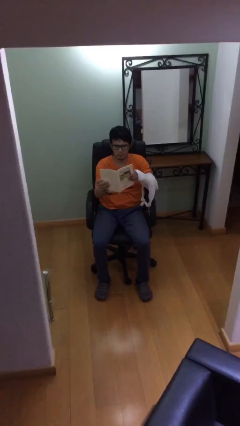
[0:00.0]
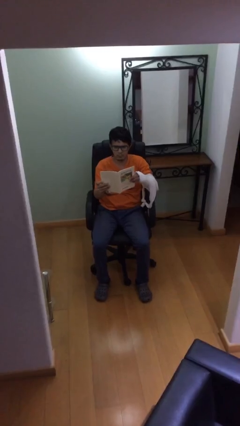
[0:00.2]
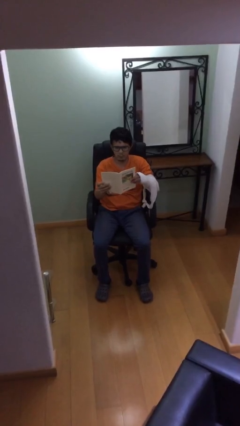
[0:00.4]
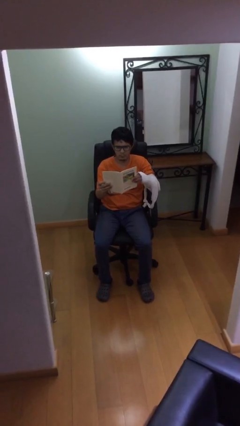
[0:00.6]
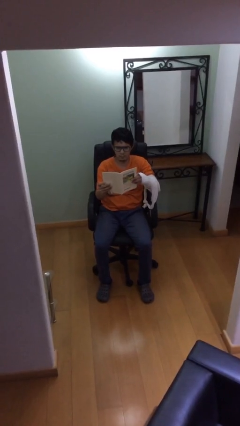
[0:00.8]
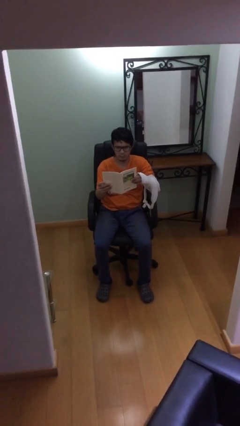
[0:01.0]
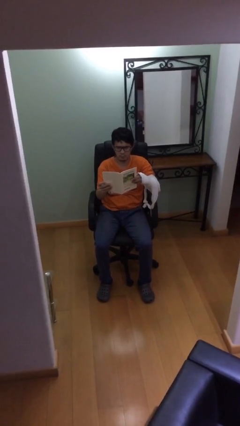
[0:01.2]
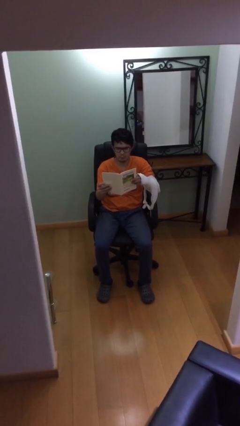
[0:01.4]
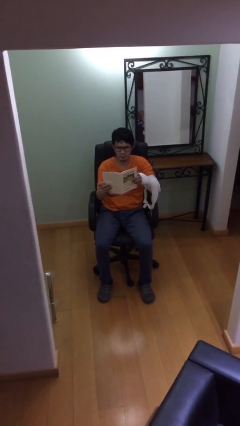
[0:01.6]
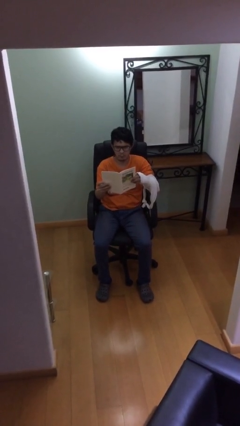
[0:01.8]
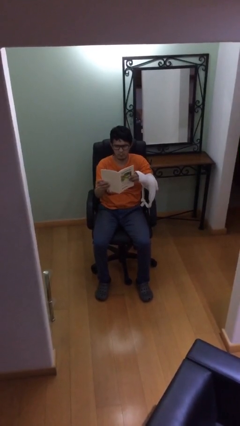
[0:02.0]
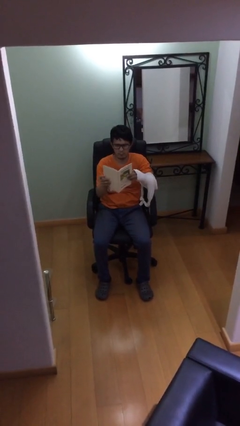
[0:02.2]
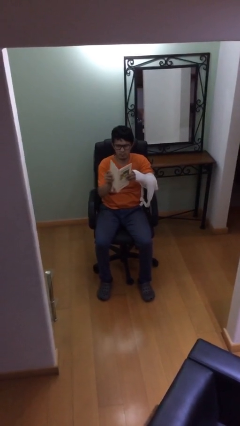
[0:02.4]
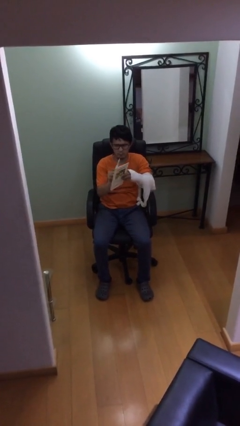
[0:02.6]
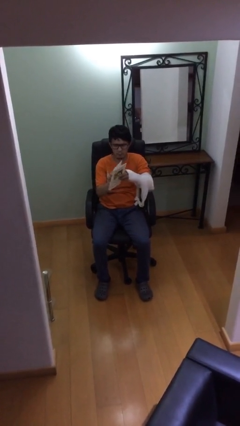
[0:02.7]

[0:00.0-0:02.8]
person reads document

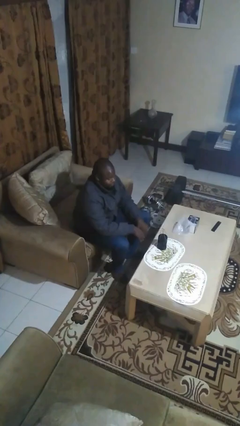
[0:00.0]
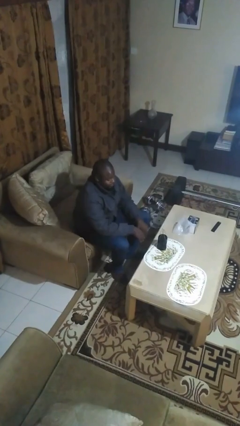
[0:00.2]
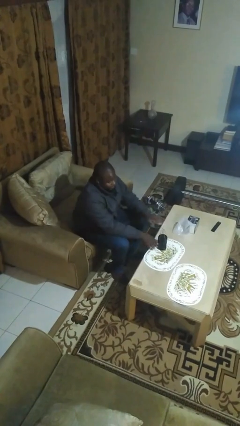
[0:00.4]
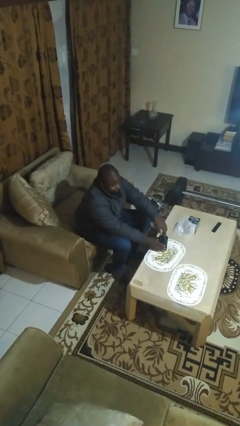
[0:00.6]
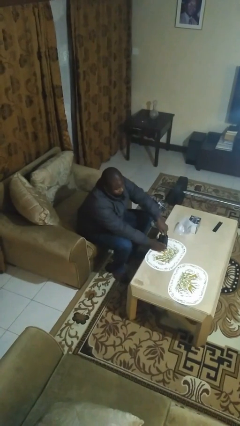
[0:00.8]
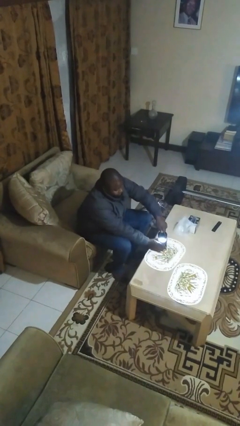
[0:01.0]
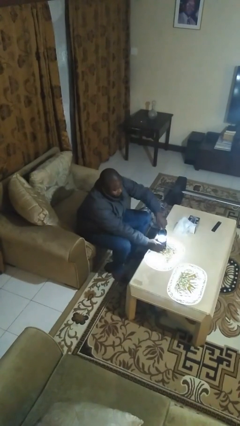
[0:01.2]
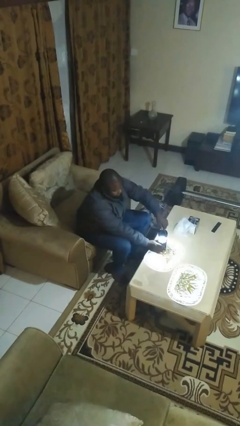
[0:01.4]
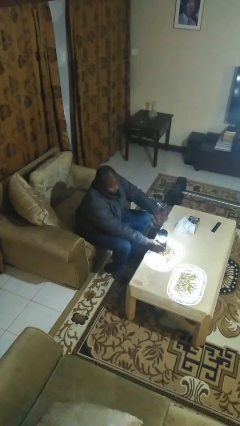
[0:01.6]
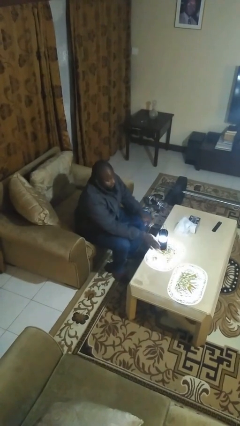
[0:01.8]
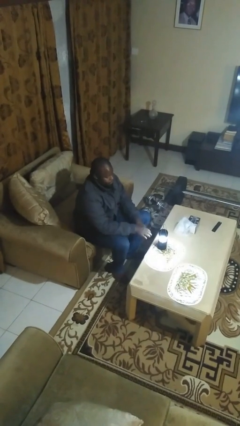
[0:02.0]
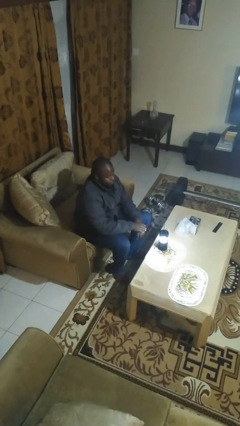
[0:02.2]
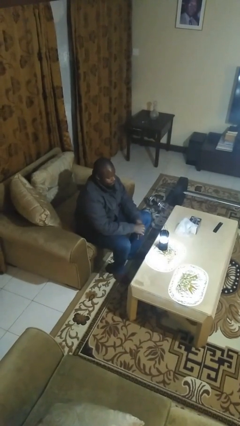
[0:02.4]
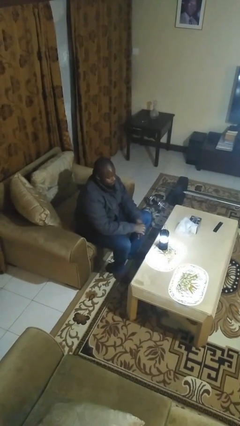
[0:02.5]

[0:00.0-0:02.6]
person turns on lamp

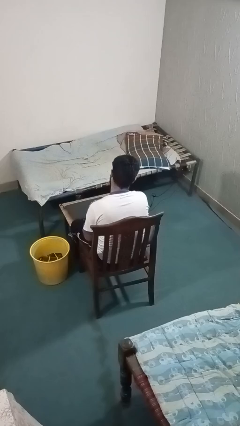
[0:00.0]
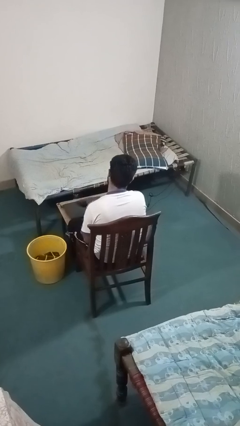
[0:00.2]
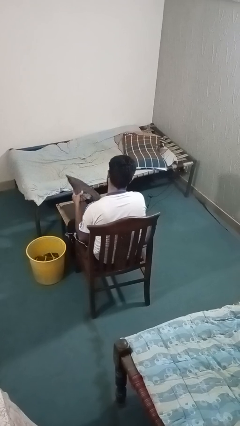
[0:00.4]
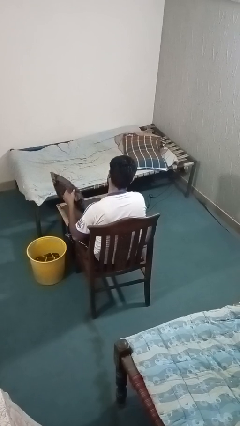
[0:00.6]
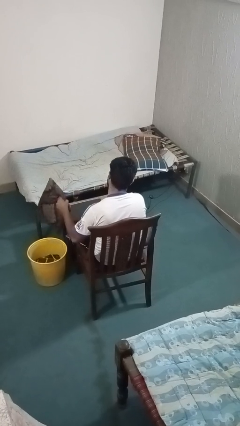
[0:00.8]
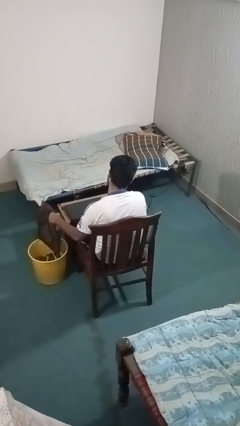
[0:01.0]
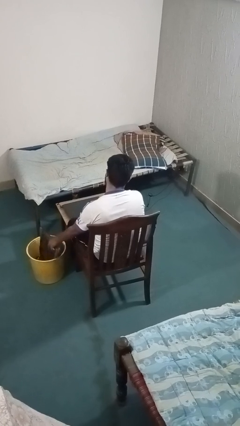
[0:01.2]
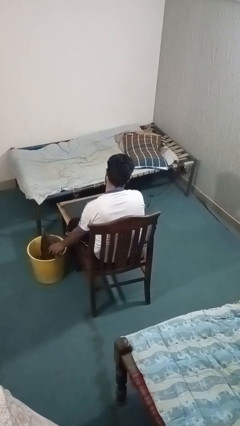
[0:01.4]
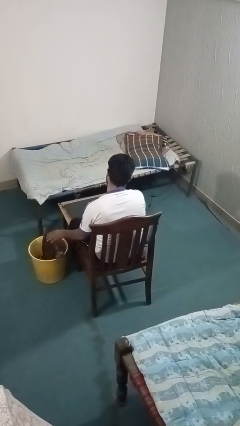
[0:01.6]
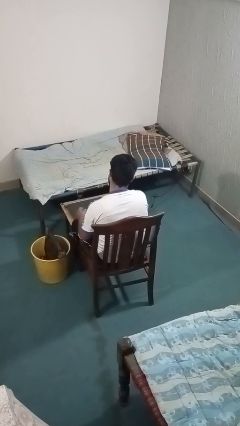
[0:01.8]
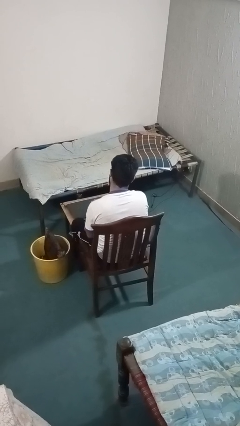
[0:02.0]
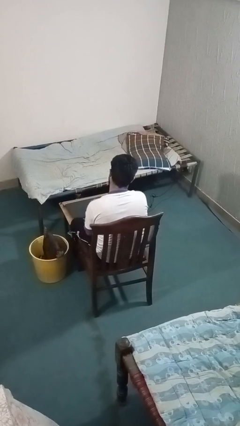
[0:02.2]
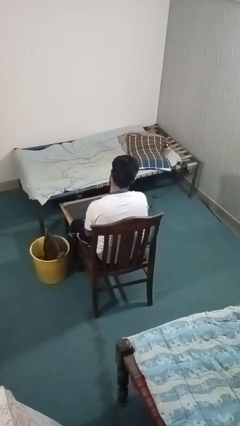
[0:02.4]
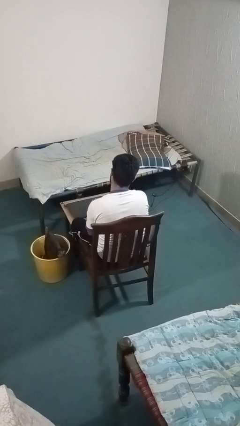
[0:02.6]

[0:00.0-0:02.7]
person puts object into basket

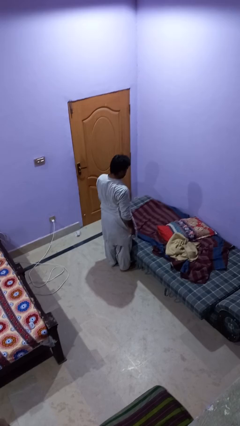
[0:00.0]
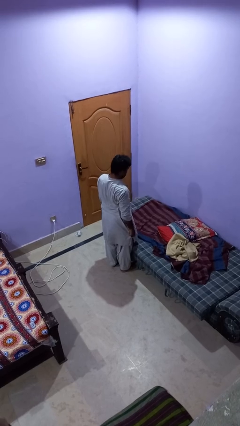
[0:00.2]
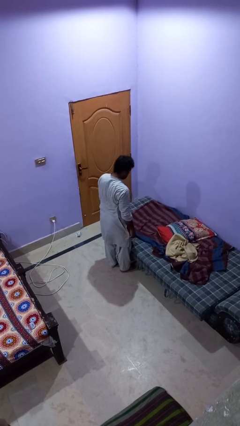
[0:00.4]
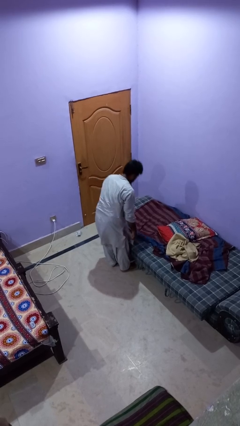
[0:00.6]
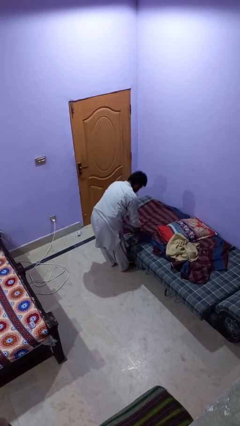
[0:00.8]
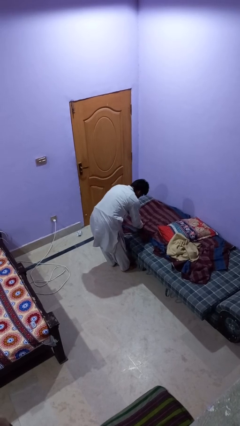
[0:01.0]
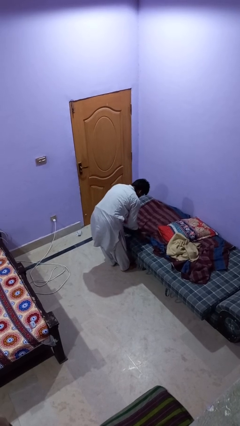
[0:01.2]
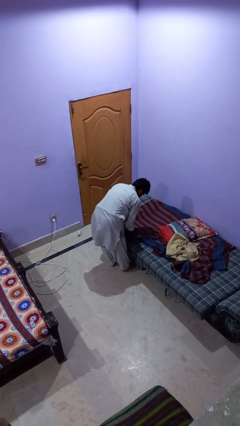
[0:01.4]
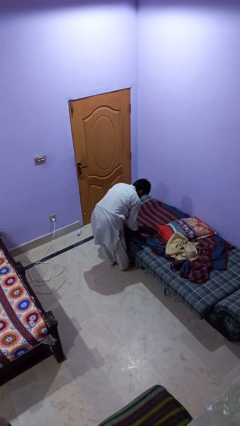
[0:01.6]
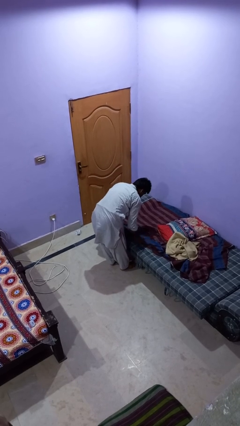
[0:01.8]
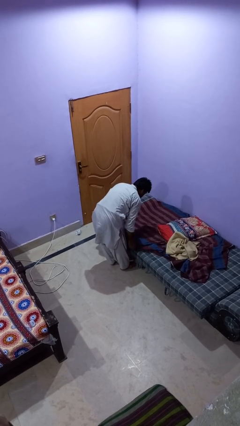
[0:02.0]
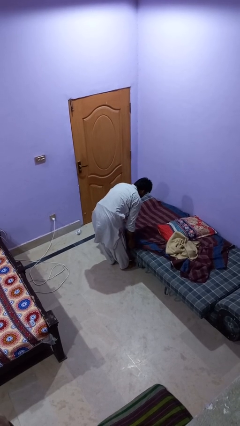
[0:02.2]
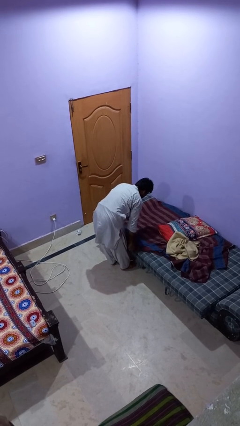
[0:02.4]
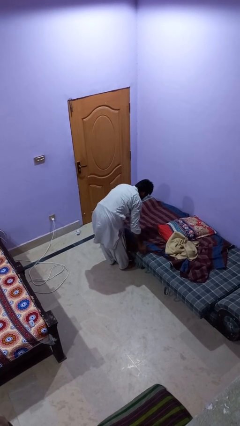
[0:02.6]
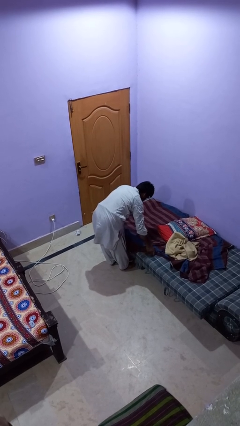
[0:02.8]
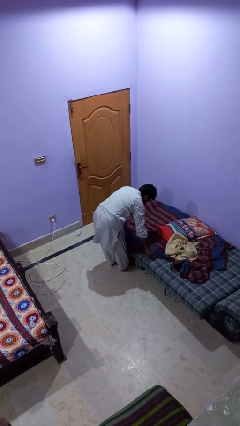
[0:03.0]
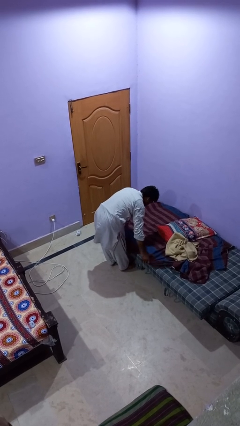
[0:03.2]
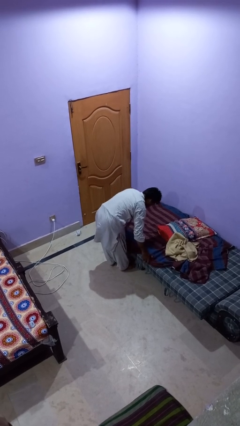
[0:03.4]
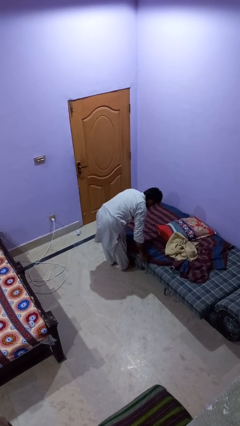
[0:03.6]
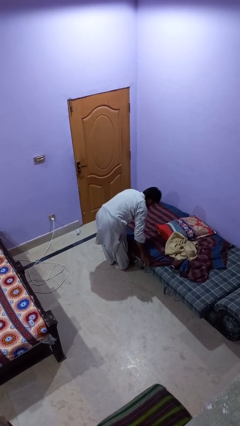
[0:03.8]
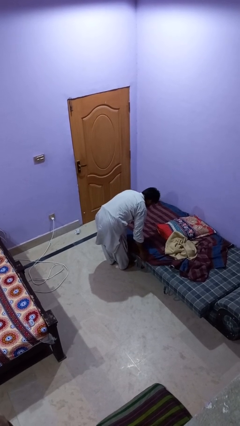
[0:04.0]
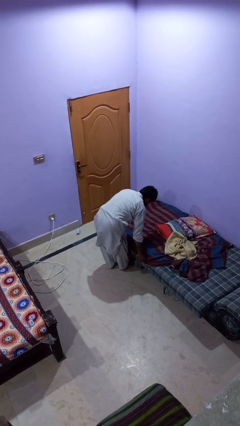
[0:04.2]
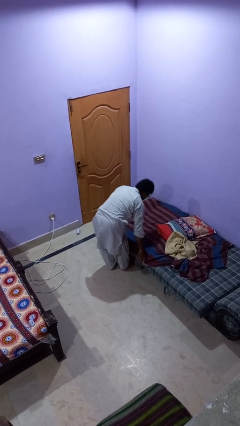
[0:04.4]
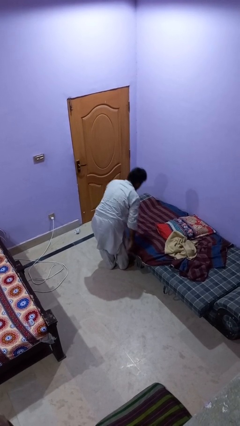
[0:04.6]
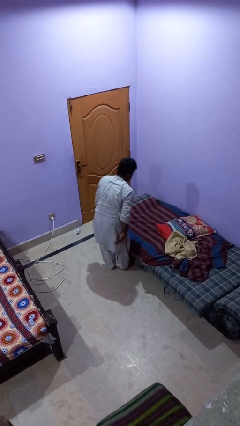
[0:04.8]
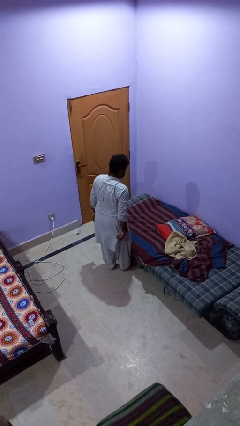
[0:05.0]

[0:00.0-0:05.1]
person makes bed

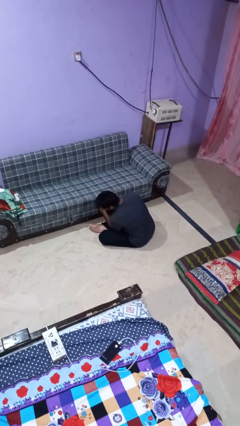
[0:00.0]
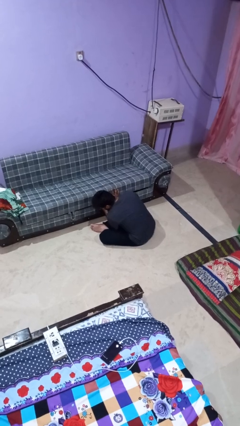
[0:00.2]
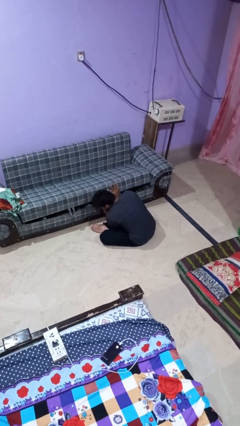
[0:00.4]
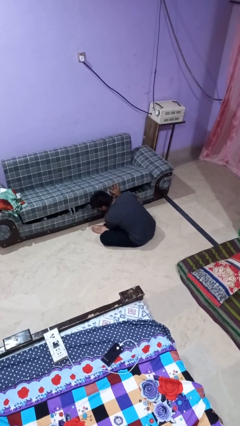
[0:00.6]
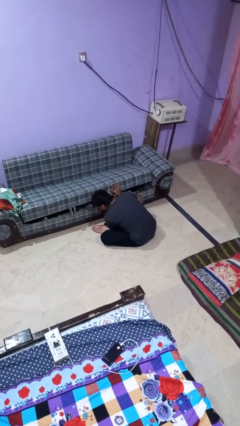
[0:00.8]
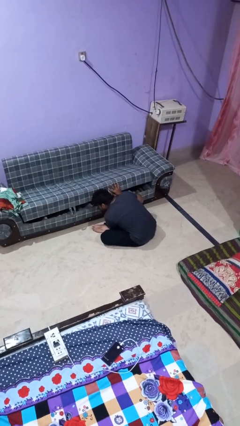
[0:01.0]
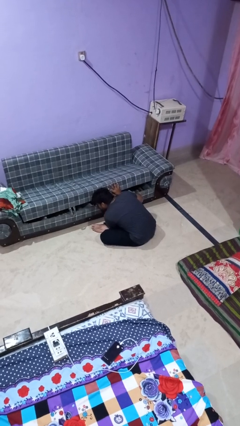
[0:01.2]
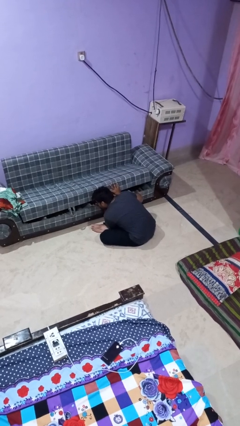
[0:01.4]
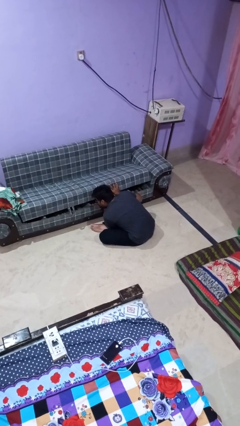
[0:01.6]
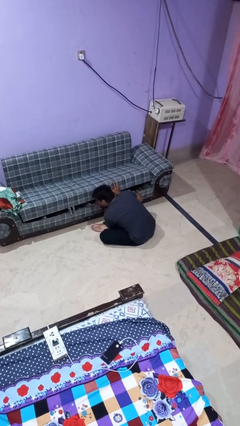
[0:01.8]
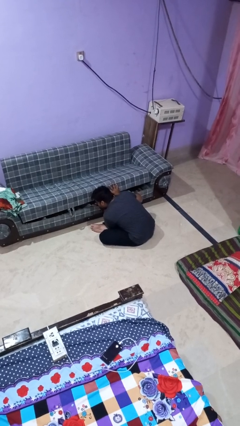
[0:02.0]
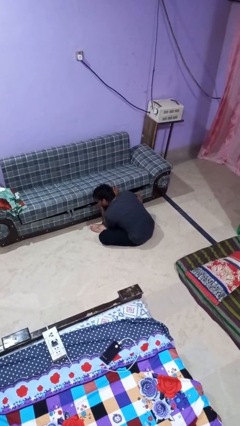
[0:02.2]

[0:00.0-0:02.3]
person searches under couch

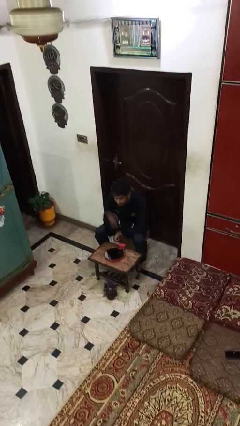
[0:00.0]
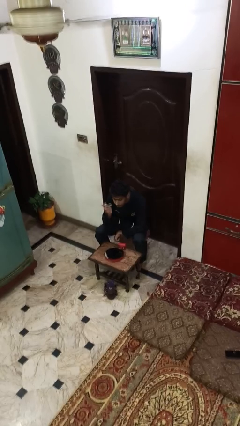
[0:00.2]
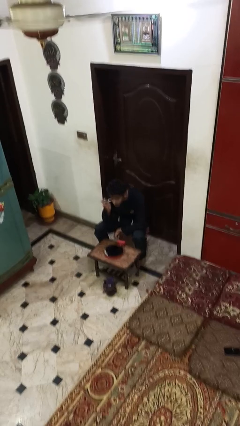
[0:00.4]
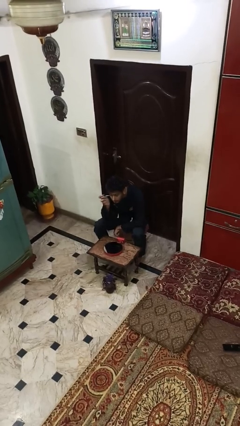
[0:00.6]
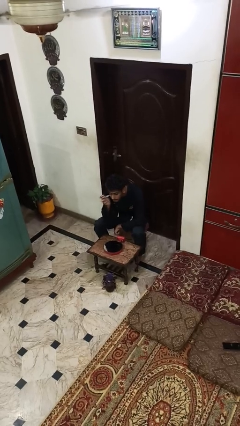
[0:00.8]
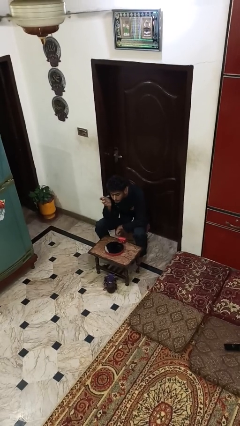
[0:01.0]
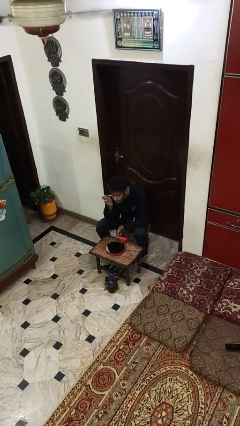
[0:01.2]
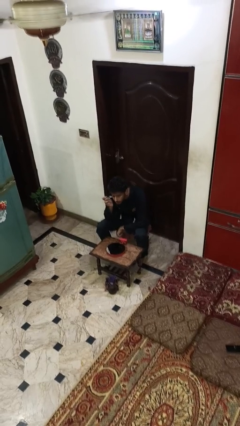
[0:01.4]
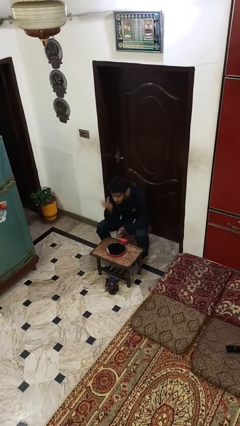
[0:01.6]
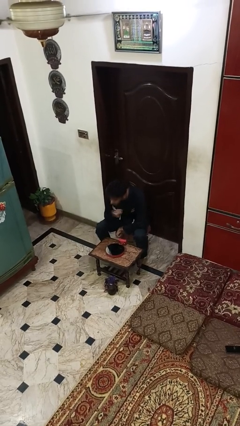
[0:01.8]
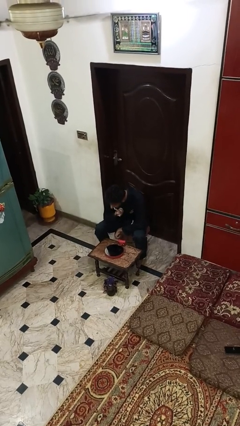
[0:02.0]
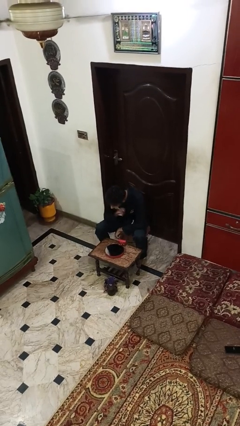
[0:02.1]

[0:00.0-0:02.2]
person applies eye makeup

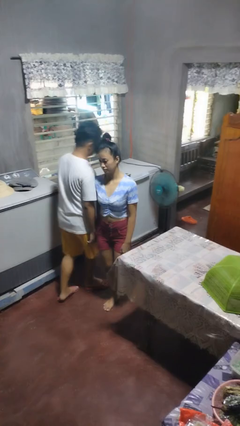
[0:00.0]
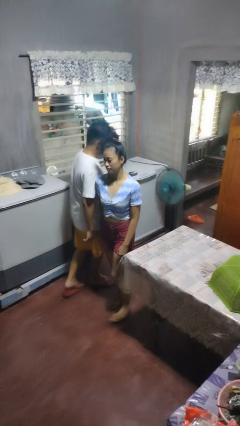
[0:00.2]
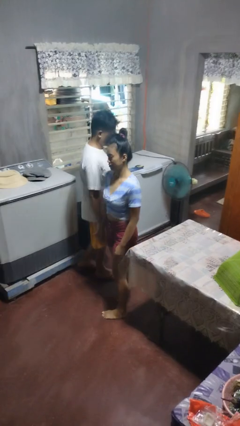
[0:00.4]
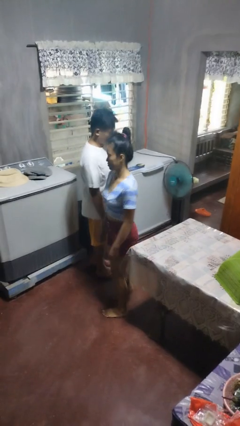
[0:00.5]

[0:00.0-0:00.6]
person bumps into person
